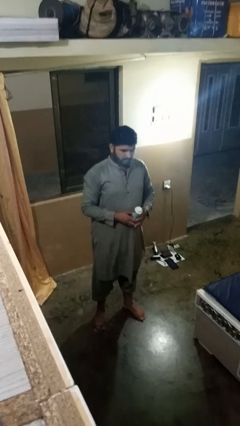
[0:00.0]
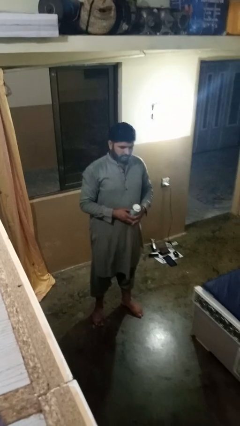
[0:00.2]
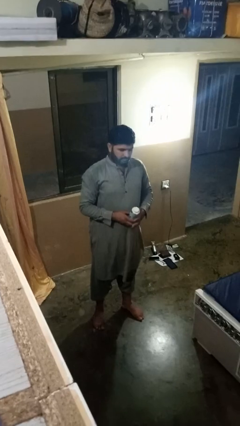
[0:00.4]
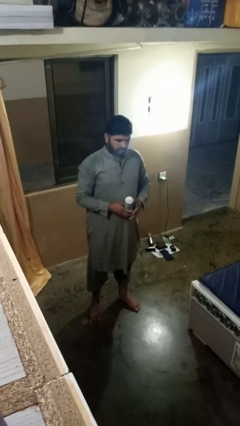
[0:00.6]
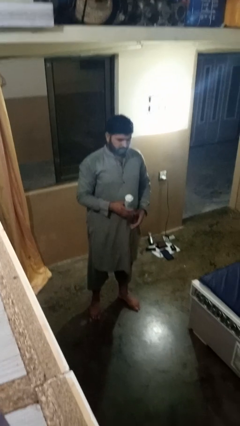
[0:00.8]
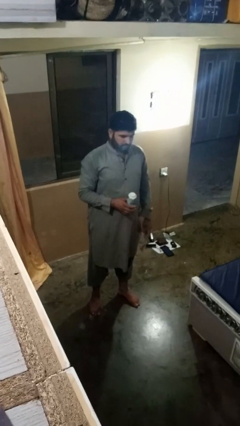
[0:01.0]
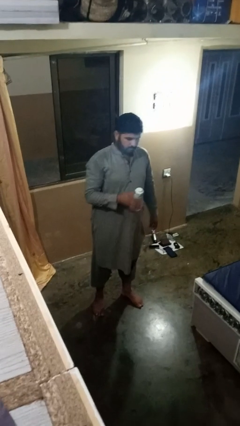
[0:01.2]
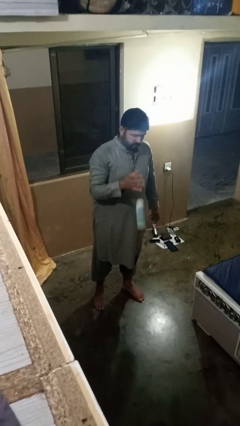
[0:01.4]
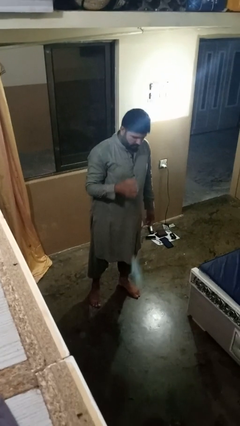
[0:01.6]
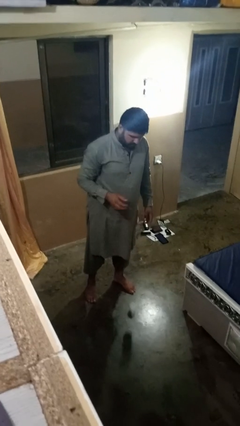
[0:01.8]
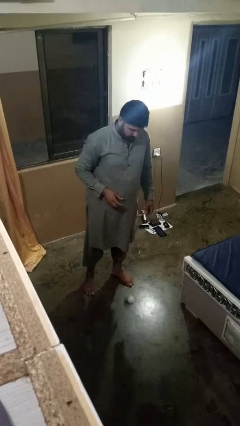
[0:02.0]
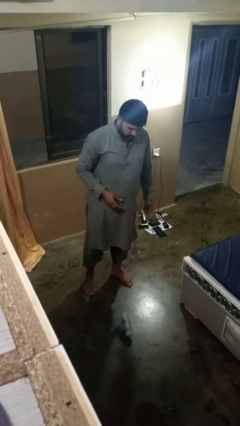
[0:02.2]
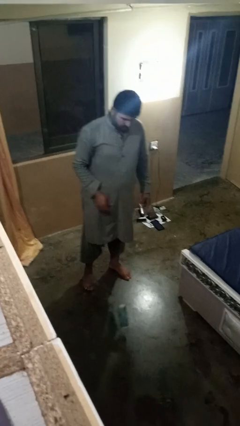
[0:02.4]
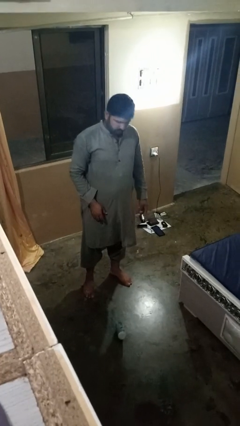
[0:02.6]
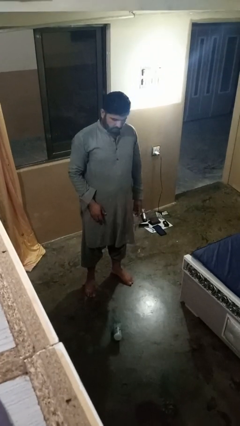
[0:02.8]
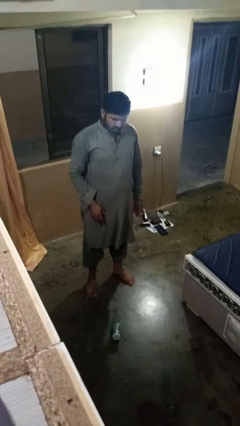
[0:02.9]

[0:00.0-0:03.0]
person throws object into air

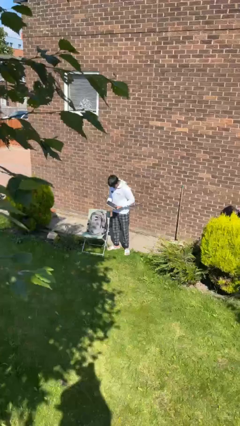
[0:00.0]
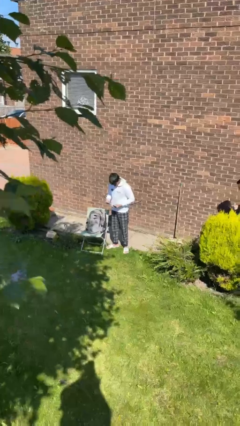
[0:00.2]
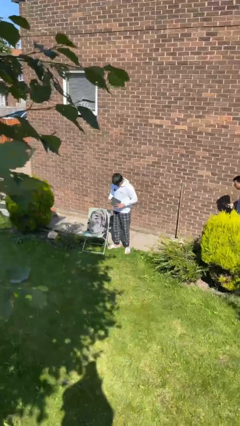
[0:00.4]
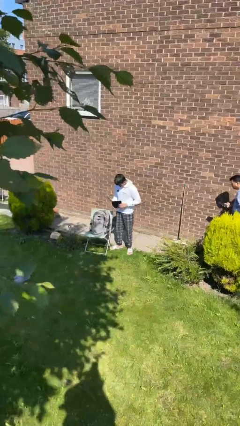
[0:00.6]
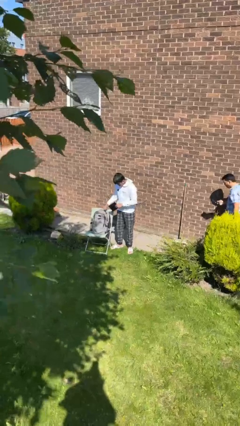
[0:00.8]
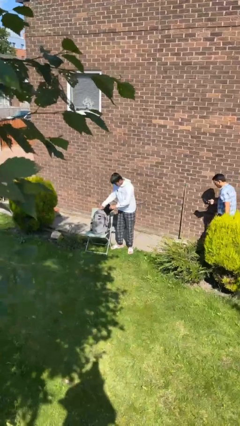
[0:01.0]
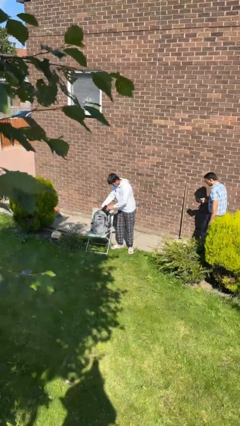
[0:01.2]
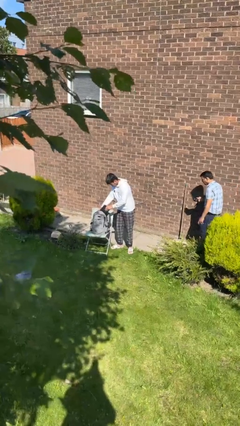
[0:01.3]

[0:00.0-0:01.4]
person puts object into backpack

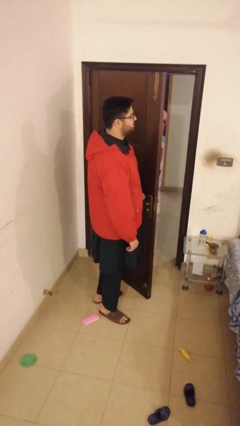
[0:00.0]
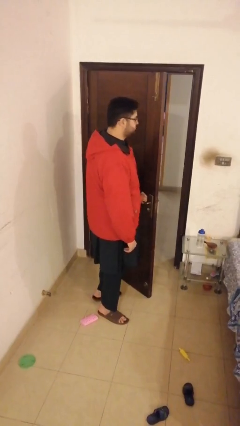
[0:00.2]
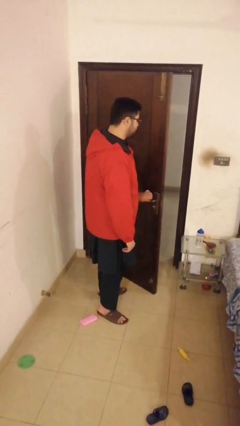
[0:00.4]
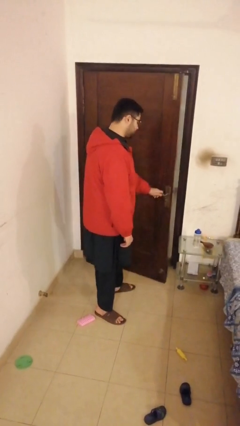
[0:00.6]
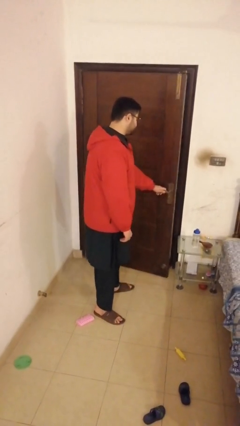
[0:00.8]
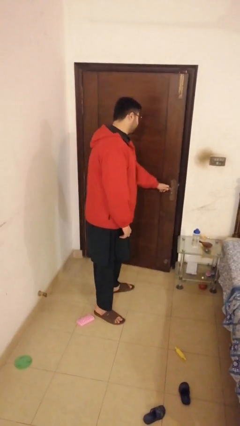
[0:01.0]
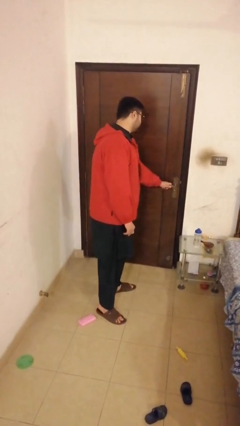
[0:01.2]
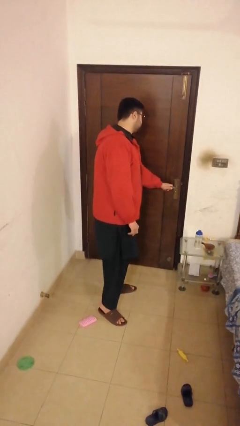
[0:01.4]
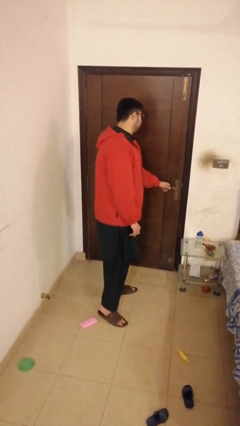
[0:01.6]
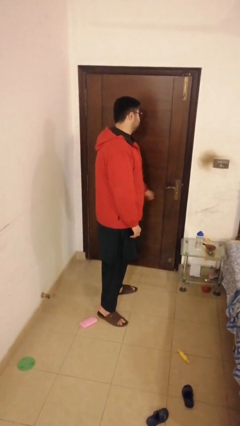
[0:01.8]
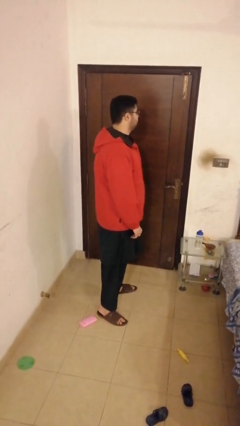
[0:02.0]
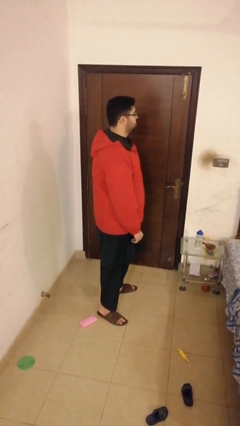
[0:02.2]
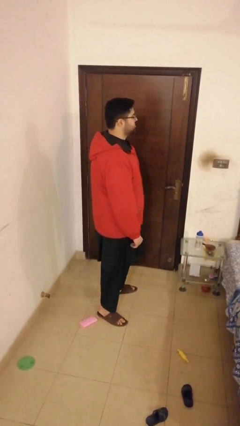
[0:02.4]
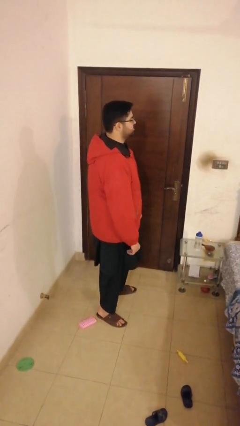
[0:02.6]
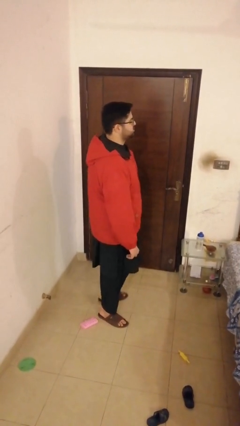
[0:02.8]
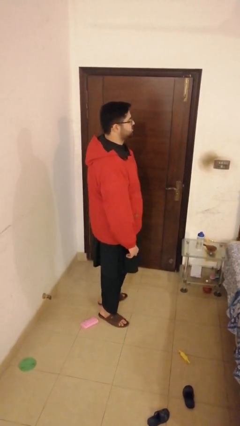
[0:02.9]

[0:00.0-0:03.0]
person closes facility door

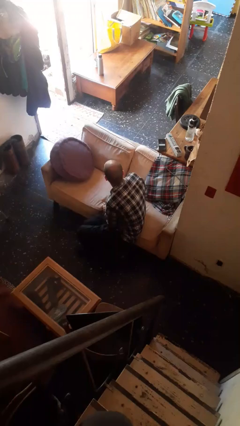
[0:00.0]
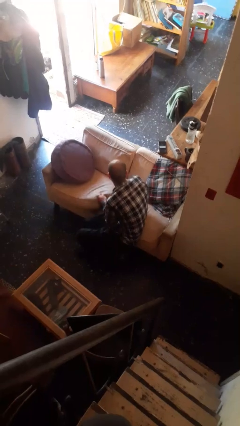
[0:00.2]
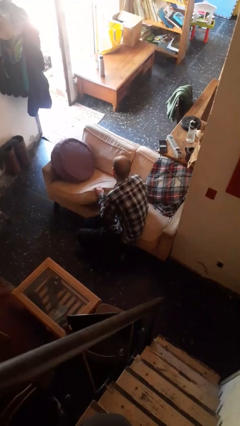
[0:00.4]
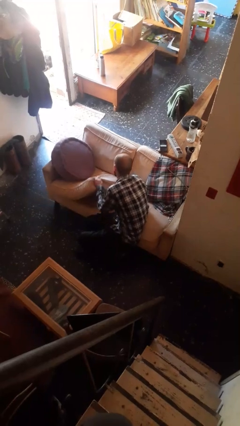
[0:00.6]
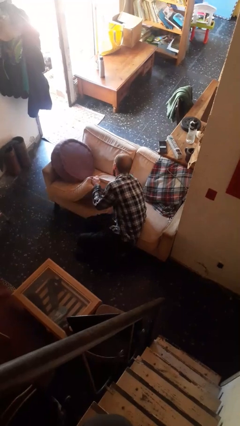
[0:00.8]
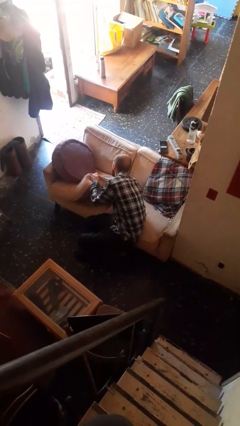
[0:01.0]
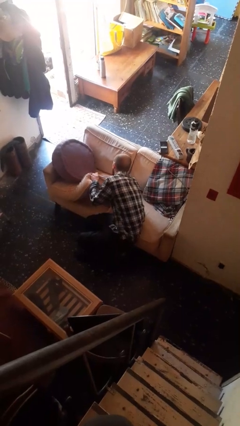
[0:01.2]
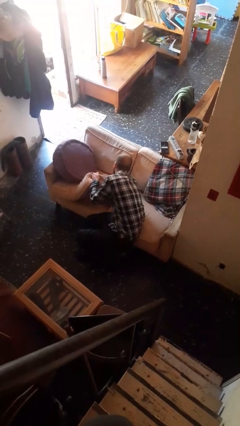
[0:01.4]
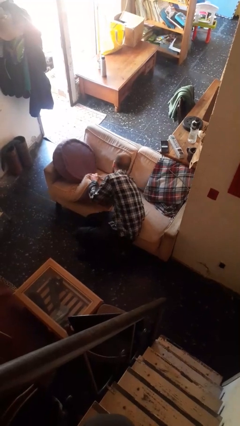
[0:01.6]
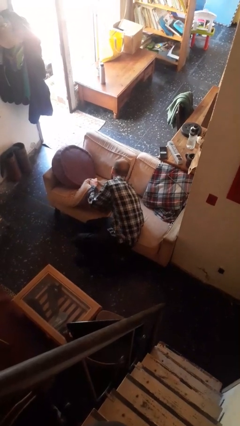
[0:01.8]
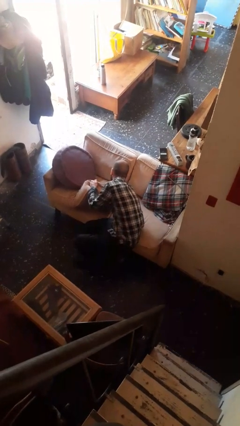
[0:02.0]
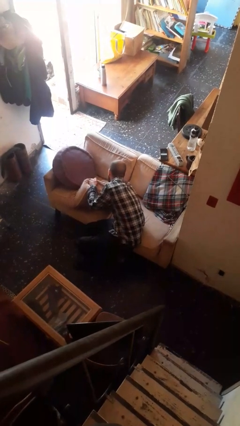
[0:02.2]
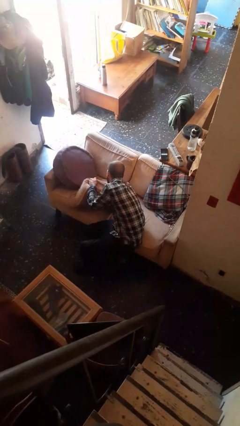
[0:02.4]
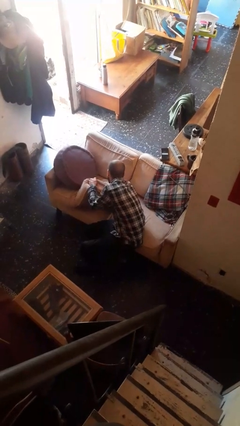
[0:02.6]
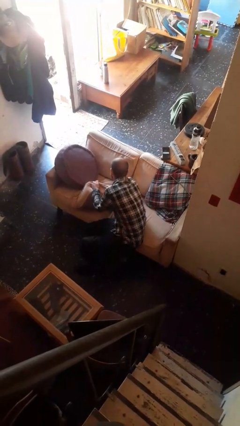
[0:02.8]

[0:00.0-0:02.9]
person searches in couch

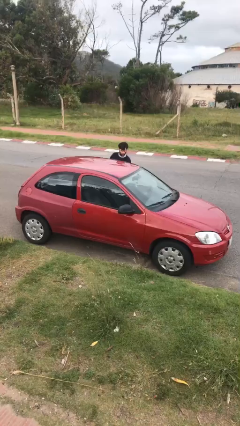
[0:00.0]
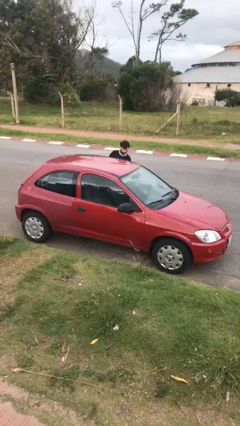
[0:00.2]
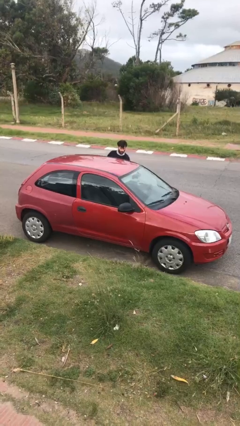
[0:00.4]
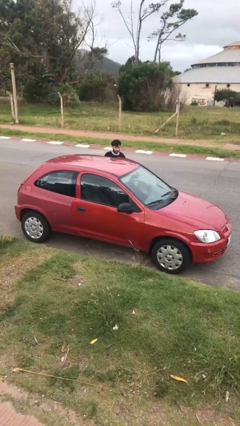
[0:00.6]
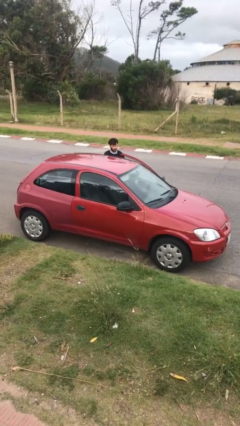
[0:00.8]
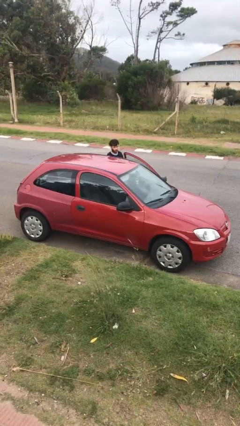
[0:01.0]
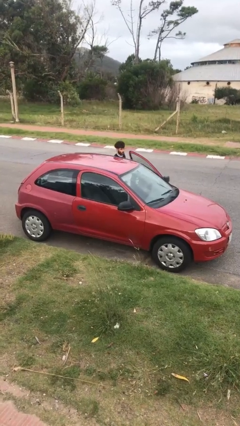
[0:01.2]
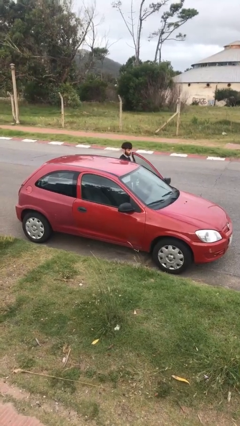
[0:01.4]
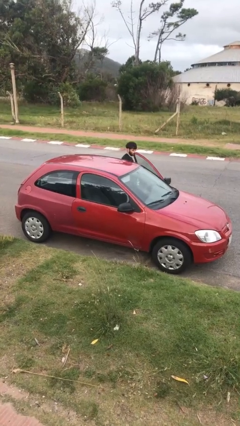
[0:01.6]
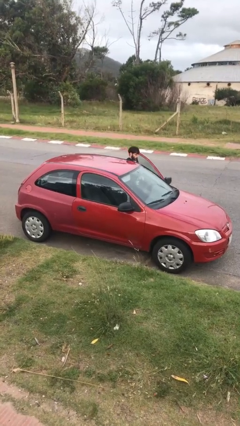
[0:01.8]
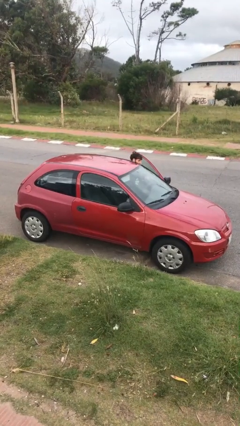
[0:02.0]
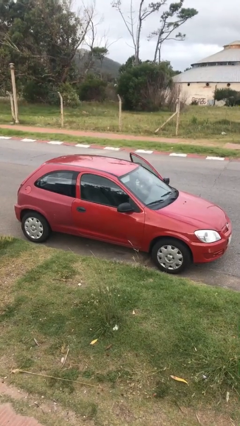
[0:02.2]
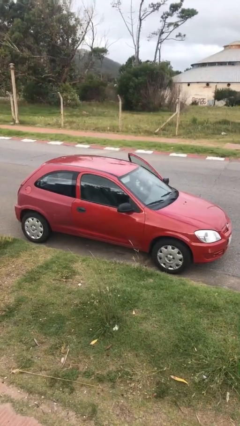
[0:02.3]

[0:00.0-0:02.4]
car picks up person

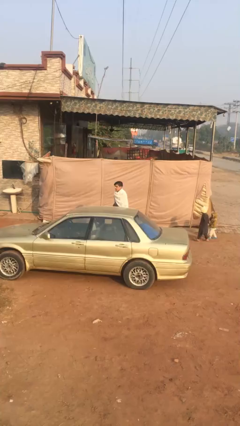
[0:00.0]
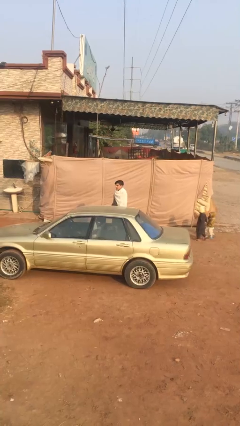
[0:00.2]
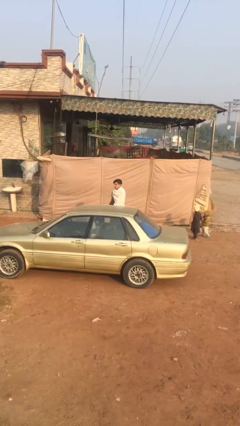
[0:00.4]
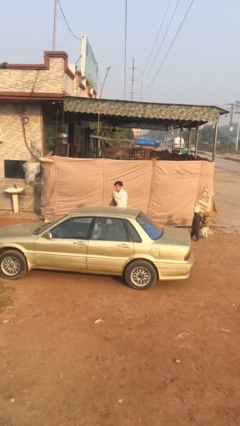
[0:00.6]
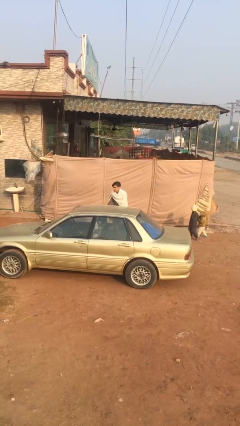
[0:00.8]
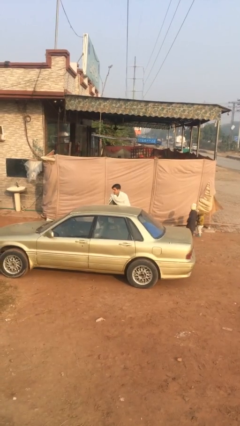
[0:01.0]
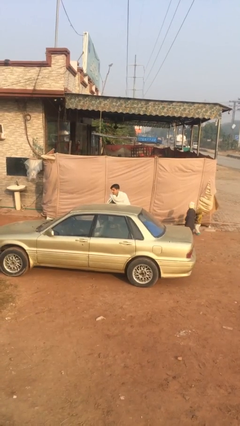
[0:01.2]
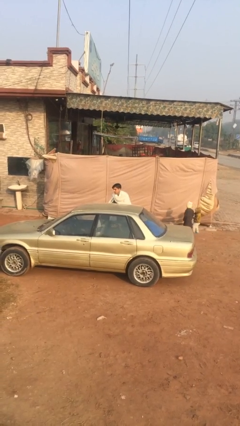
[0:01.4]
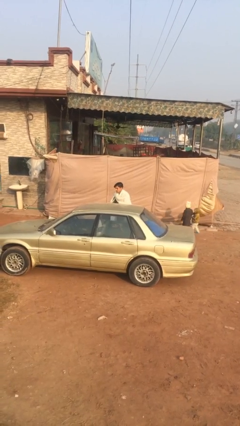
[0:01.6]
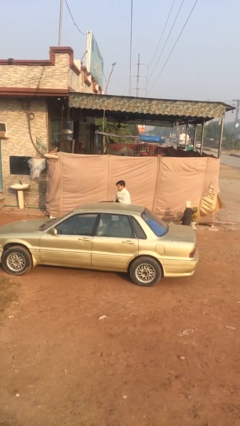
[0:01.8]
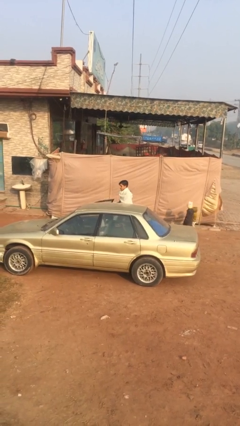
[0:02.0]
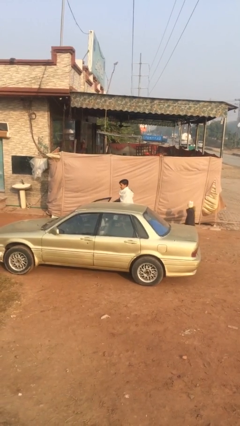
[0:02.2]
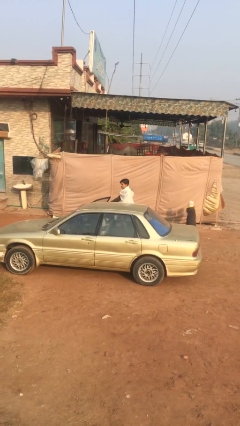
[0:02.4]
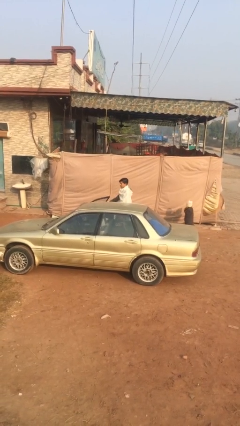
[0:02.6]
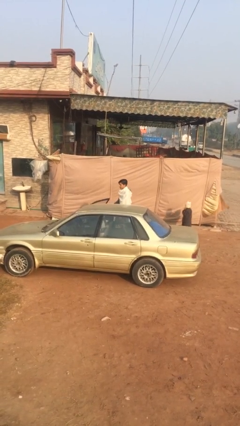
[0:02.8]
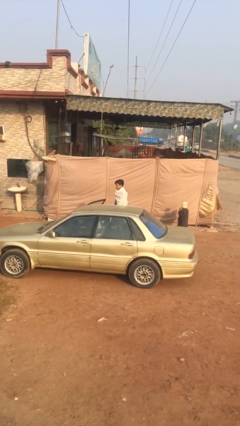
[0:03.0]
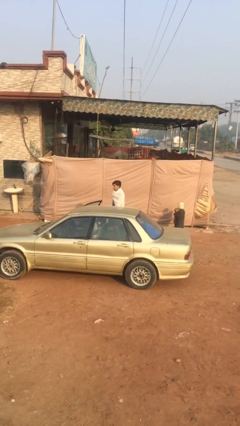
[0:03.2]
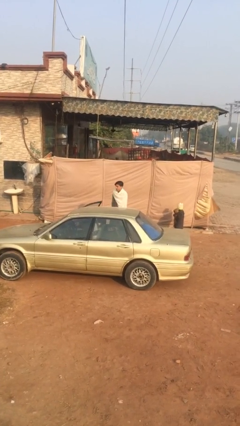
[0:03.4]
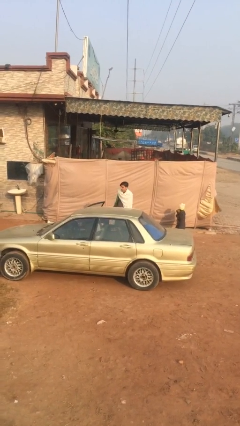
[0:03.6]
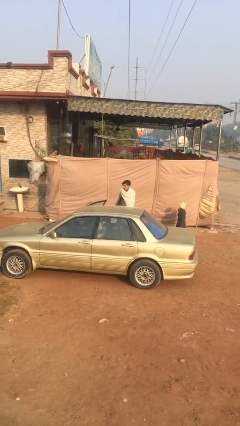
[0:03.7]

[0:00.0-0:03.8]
person opens car door

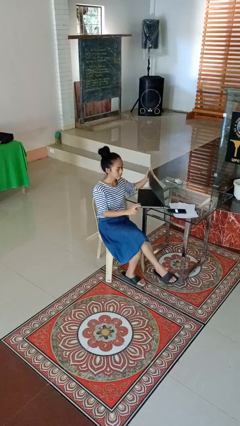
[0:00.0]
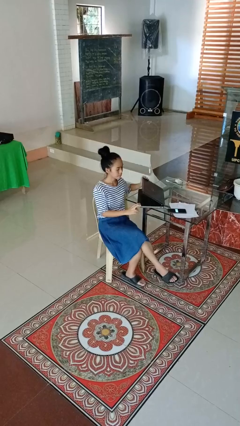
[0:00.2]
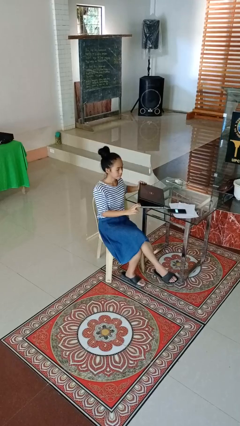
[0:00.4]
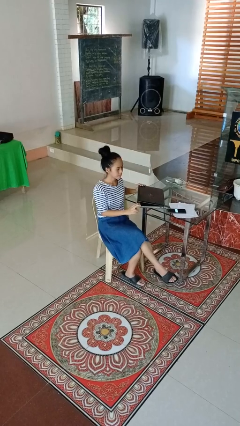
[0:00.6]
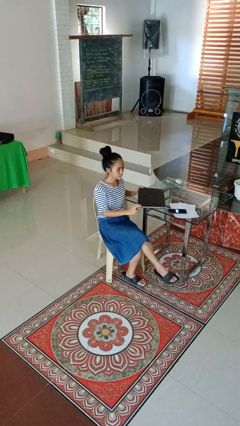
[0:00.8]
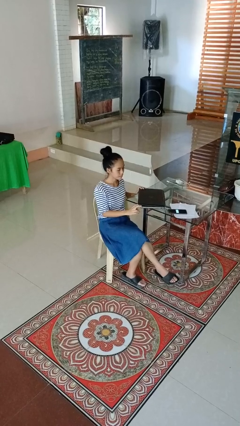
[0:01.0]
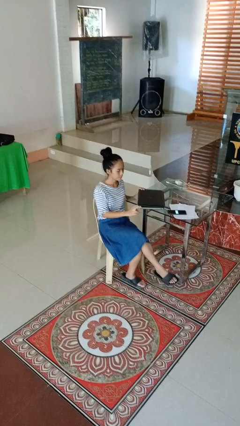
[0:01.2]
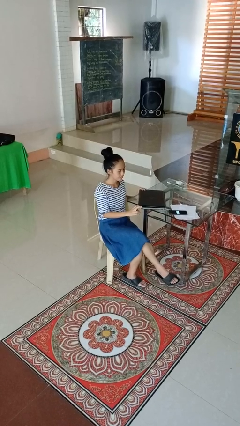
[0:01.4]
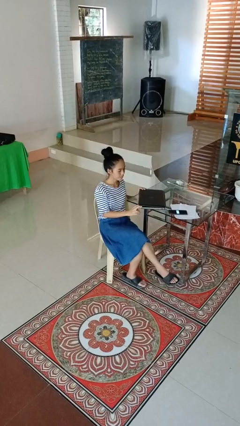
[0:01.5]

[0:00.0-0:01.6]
person closes laptop
